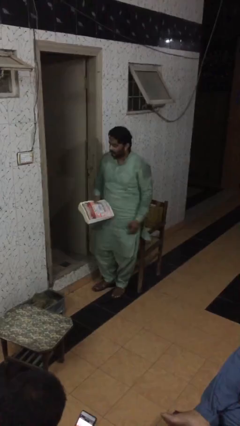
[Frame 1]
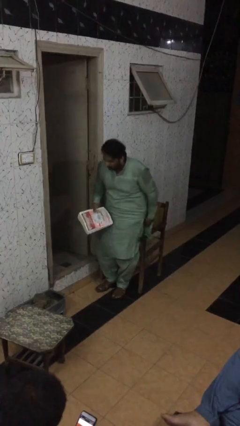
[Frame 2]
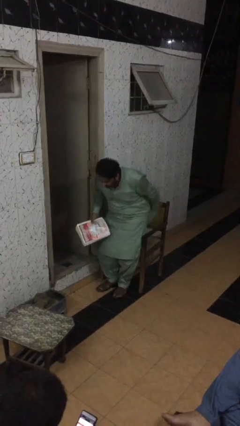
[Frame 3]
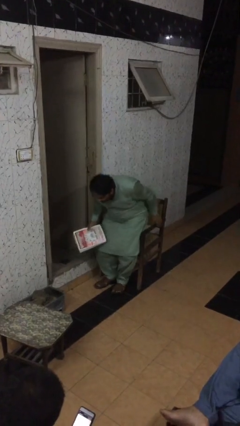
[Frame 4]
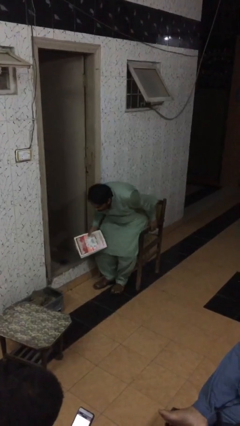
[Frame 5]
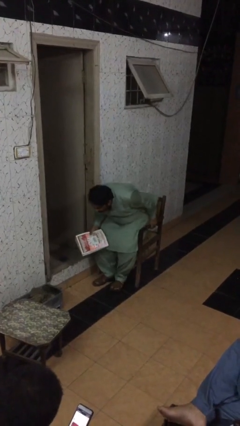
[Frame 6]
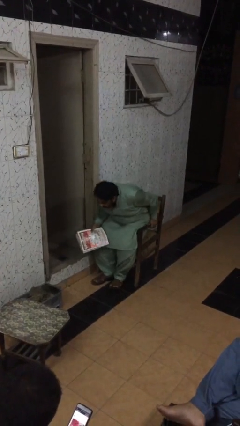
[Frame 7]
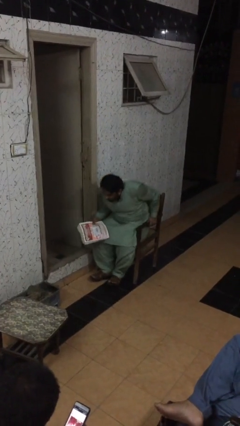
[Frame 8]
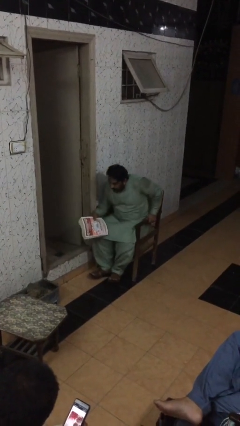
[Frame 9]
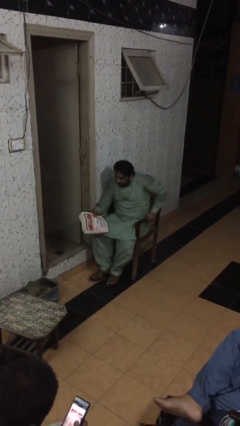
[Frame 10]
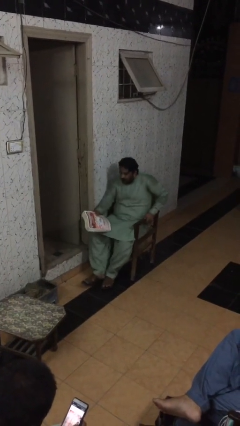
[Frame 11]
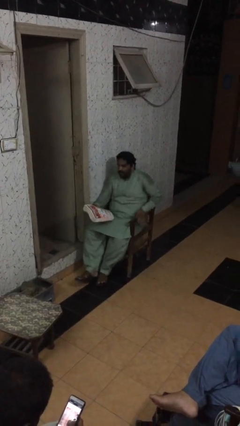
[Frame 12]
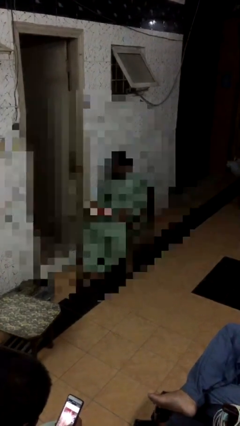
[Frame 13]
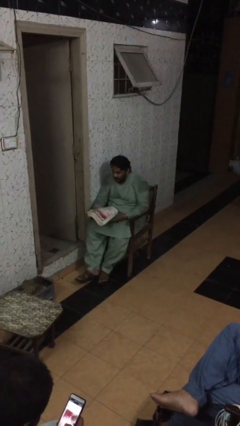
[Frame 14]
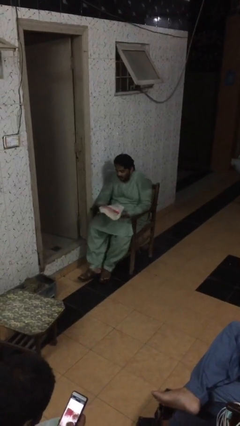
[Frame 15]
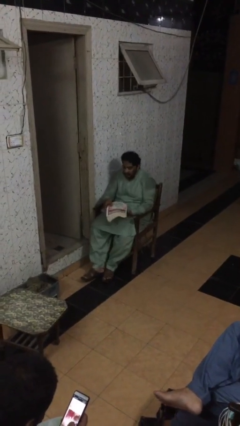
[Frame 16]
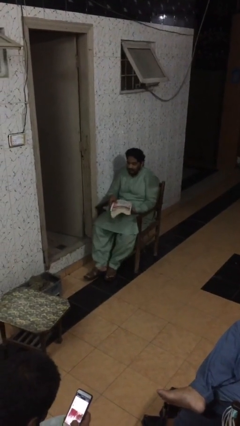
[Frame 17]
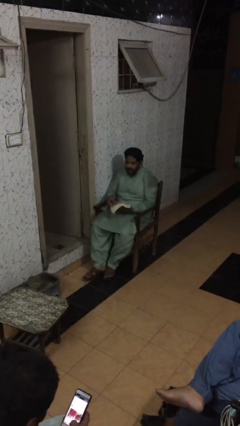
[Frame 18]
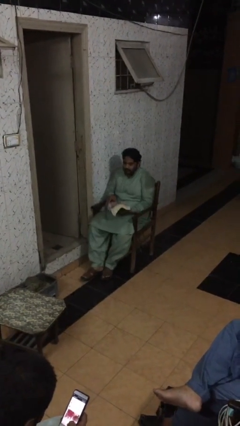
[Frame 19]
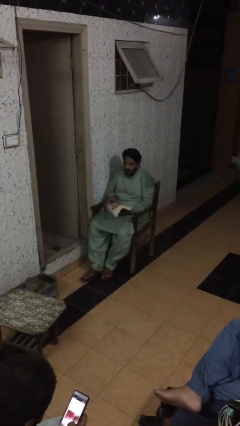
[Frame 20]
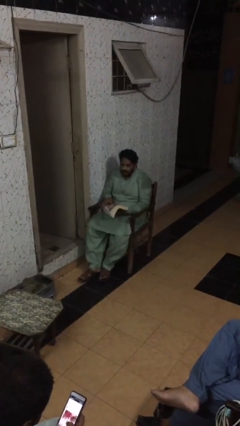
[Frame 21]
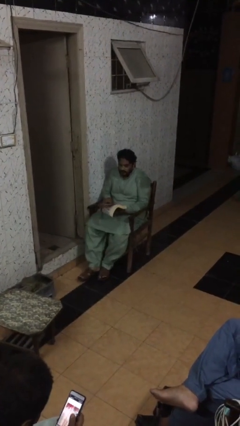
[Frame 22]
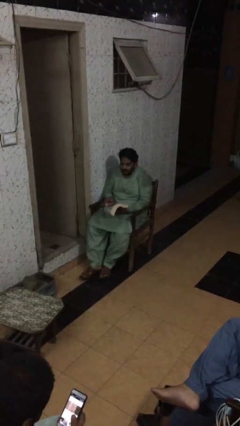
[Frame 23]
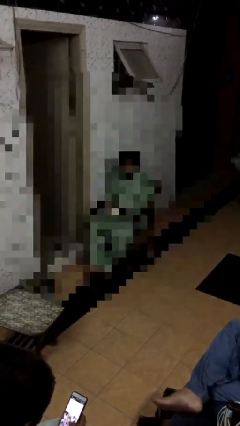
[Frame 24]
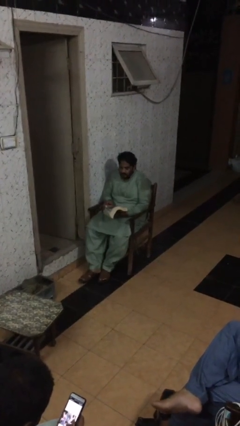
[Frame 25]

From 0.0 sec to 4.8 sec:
person sits down

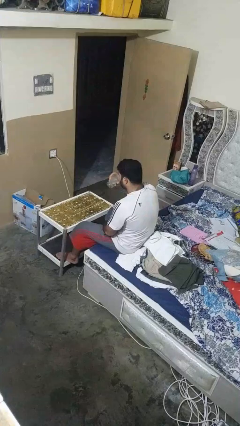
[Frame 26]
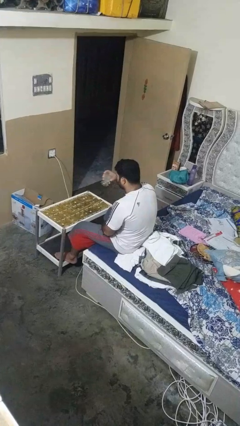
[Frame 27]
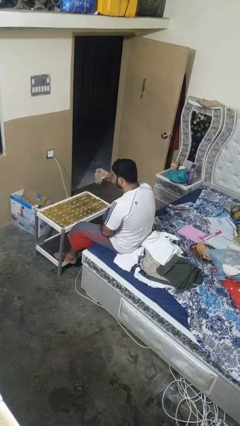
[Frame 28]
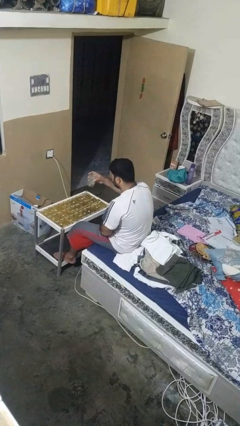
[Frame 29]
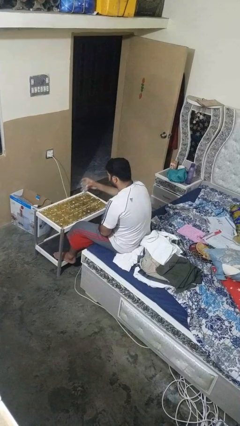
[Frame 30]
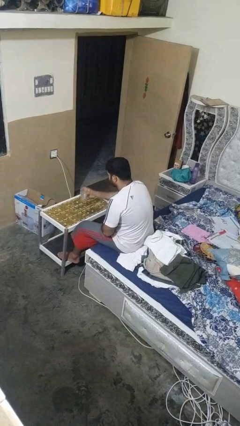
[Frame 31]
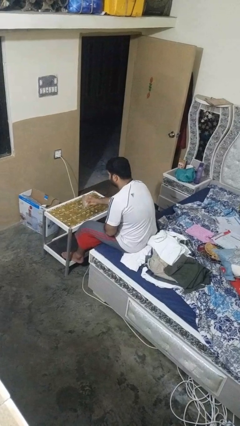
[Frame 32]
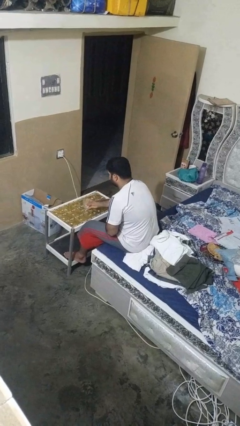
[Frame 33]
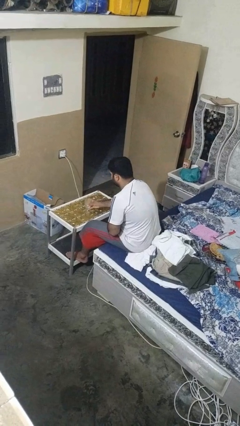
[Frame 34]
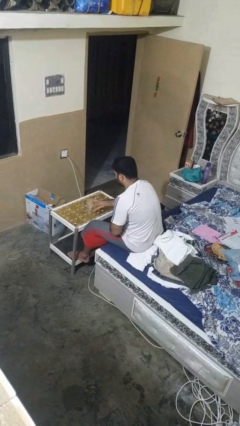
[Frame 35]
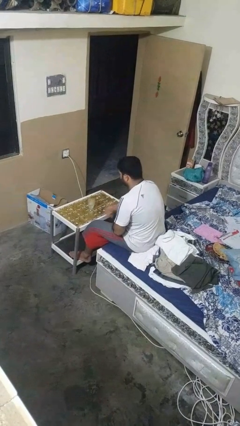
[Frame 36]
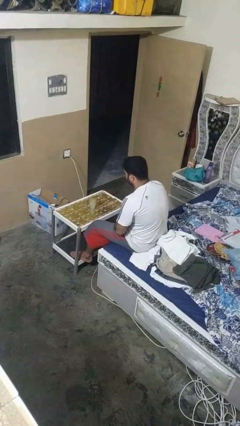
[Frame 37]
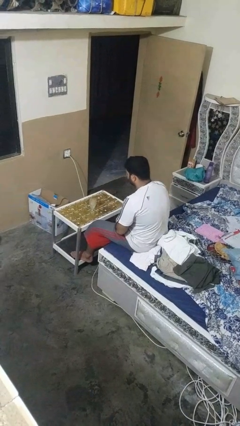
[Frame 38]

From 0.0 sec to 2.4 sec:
person puts down object on table

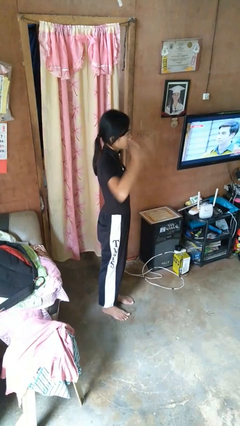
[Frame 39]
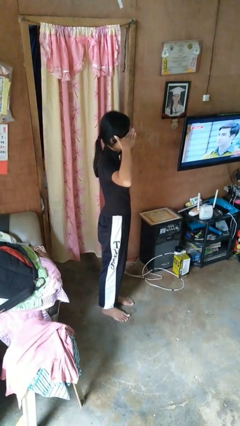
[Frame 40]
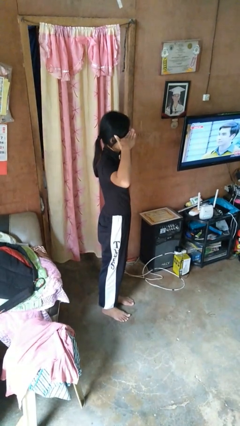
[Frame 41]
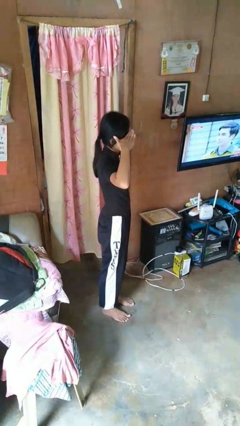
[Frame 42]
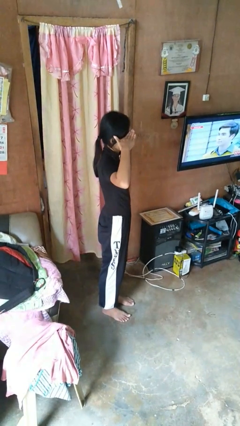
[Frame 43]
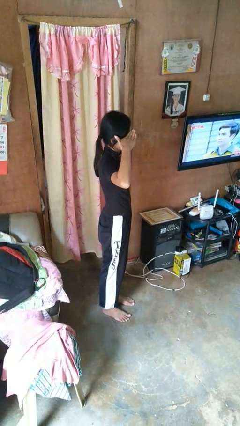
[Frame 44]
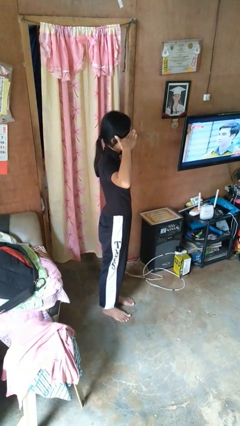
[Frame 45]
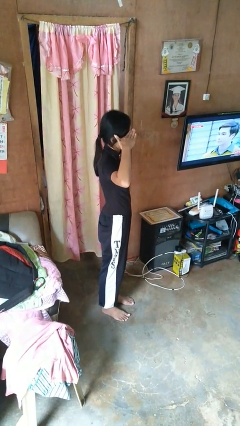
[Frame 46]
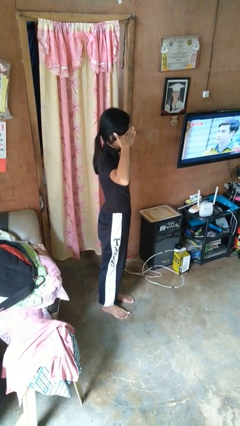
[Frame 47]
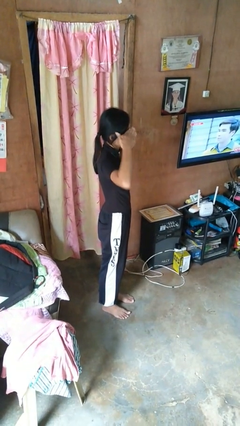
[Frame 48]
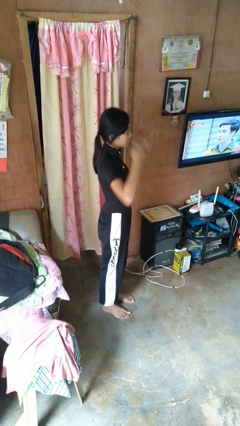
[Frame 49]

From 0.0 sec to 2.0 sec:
person salutes

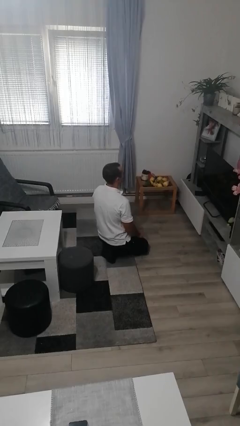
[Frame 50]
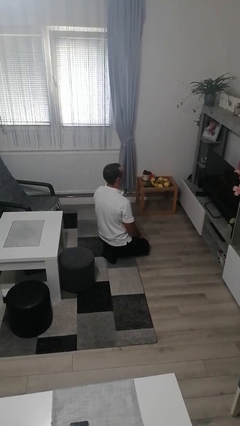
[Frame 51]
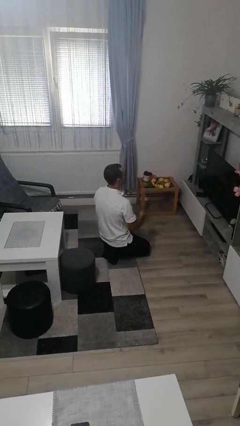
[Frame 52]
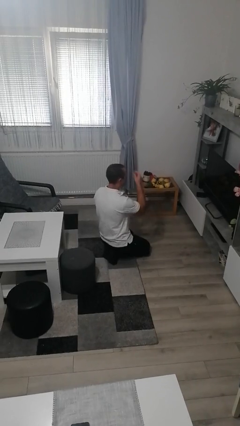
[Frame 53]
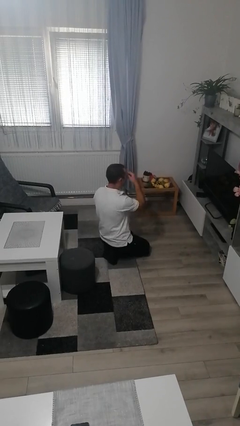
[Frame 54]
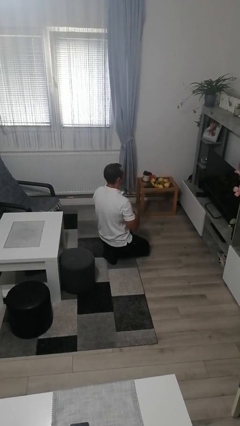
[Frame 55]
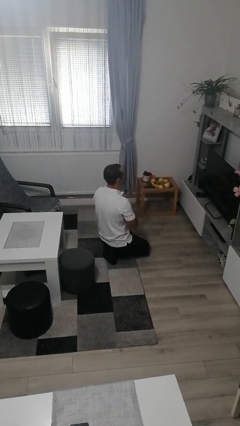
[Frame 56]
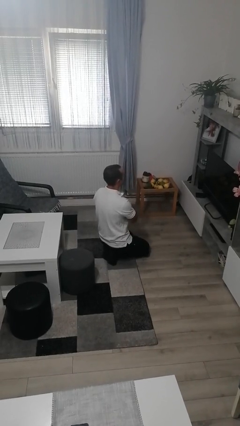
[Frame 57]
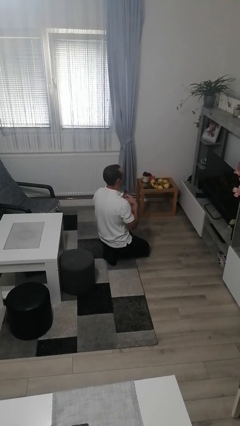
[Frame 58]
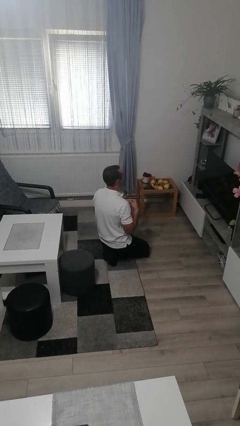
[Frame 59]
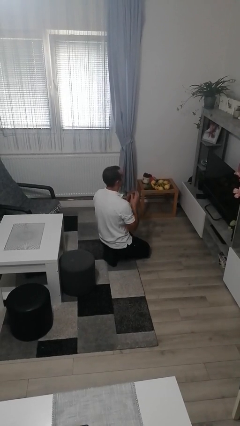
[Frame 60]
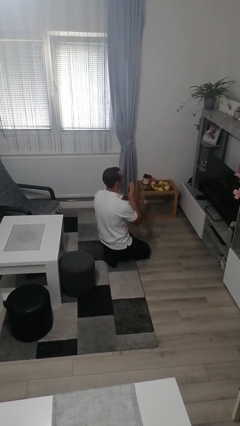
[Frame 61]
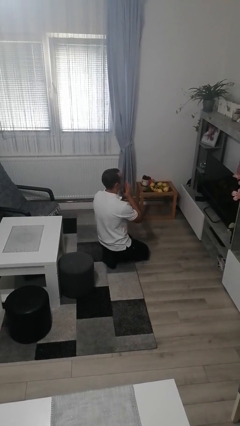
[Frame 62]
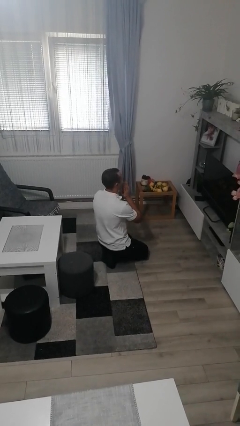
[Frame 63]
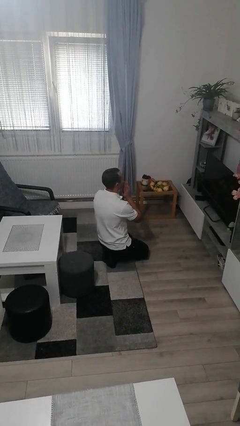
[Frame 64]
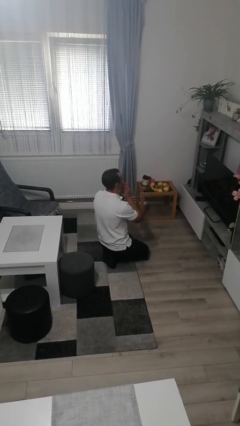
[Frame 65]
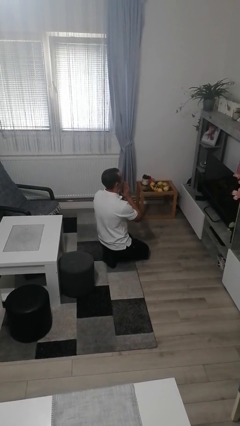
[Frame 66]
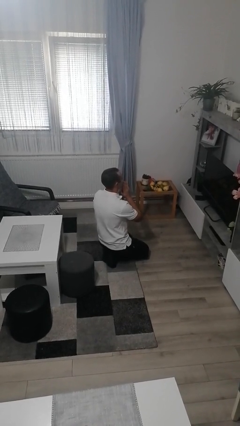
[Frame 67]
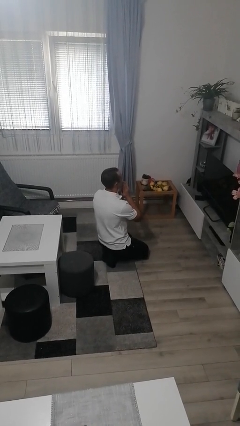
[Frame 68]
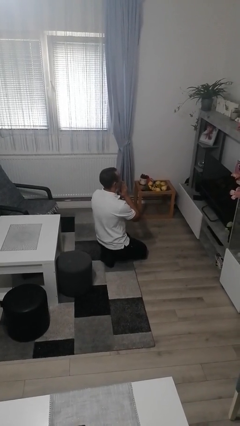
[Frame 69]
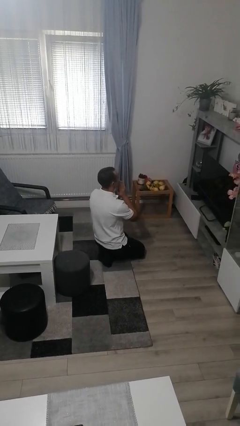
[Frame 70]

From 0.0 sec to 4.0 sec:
person prays

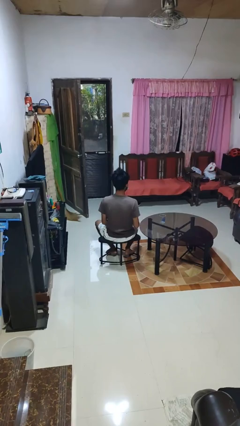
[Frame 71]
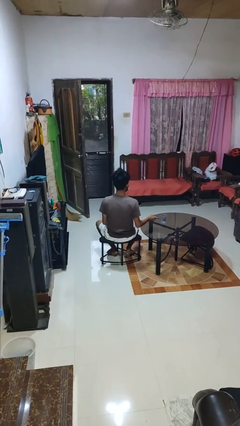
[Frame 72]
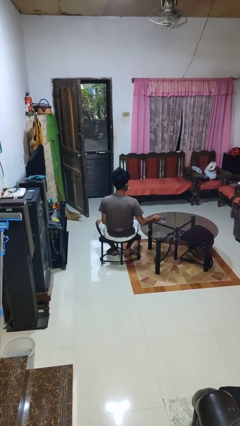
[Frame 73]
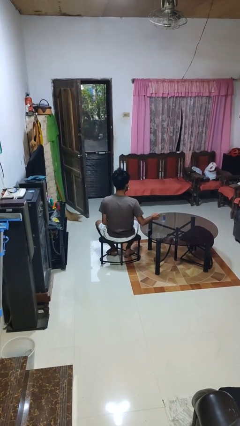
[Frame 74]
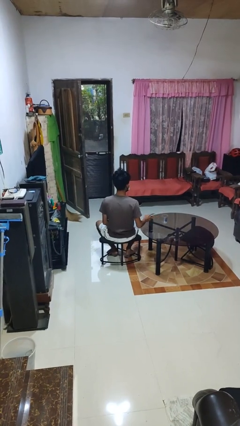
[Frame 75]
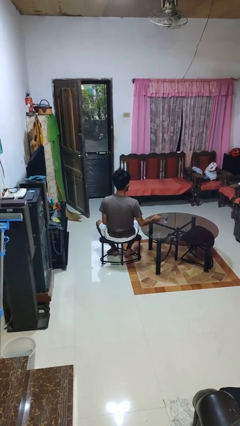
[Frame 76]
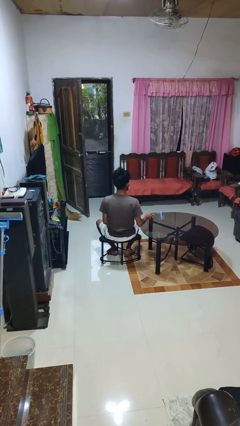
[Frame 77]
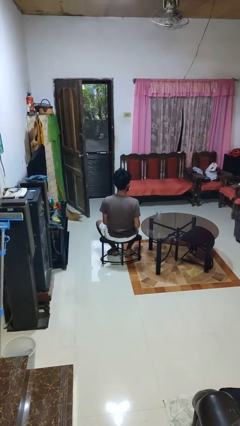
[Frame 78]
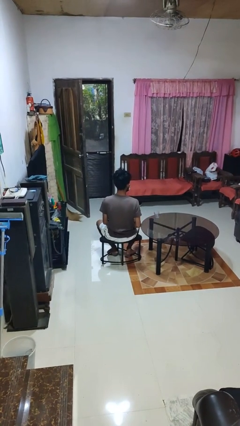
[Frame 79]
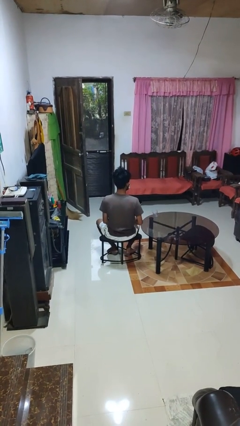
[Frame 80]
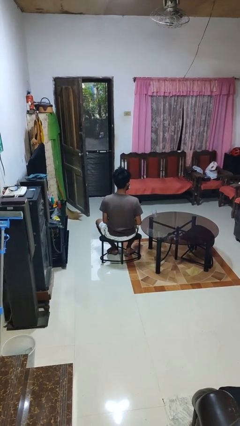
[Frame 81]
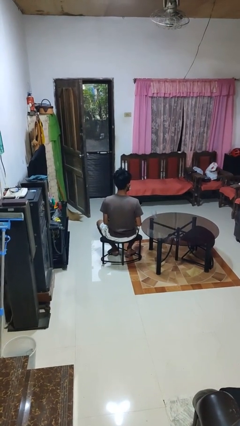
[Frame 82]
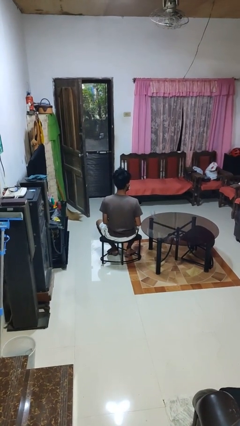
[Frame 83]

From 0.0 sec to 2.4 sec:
person knocks over glass

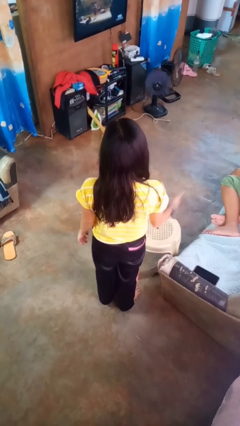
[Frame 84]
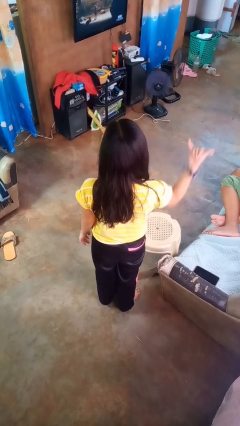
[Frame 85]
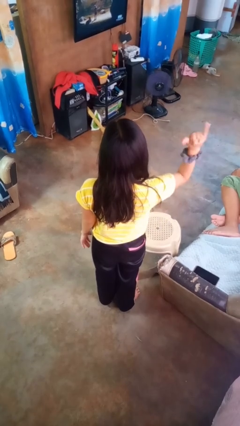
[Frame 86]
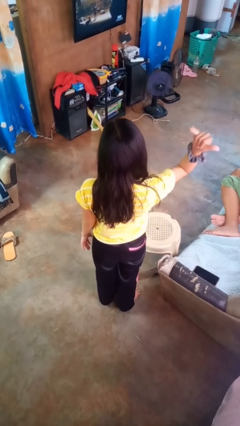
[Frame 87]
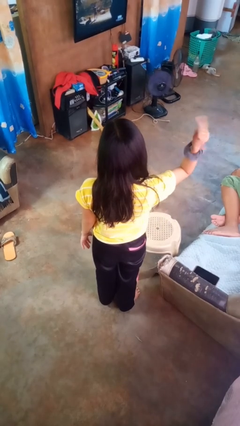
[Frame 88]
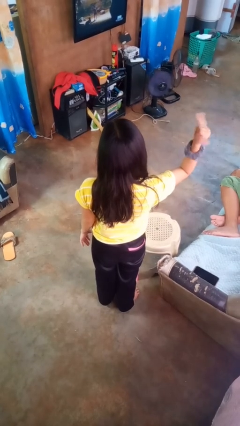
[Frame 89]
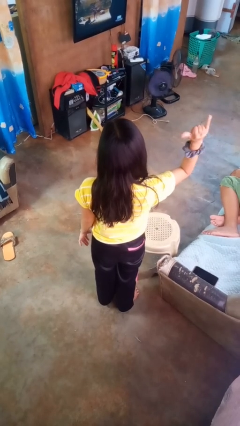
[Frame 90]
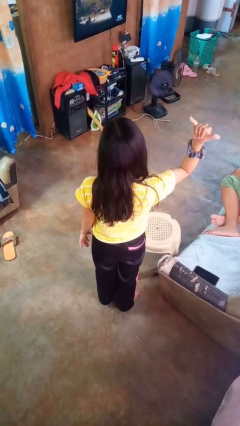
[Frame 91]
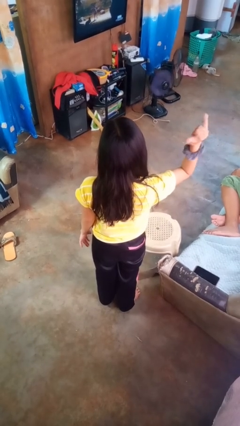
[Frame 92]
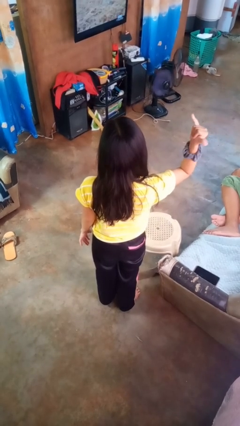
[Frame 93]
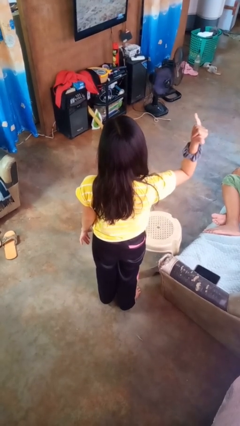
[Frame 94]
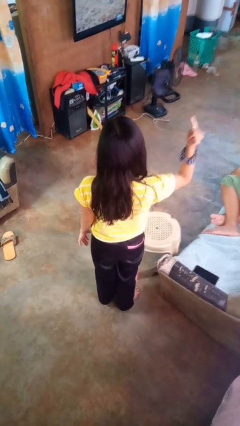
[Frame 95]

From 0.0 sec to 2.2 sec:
person gestures hang loose
